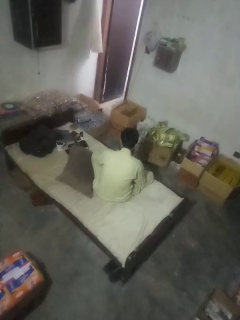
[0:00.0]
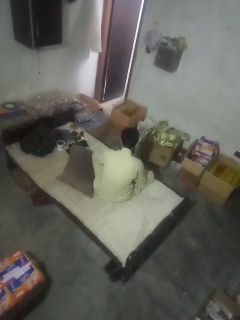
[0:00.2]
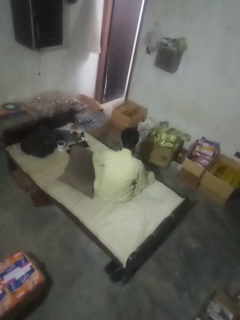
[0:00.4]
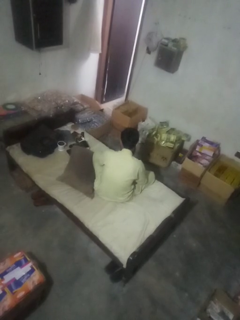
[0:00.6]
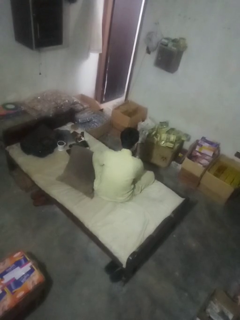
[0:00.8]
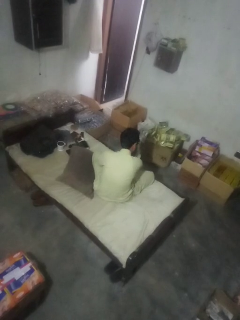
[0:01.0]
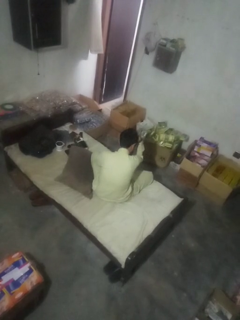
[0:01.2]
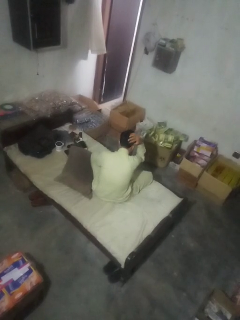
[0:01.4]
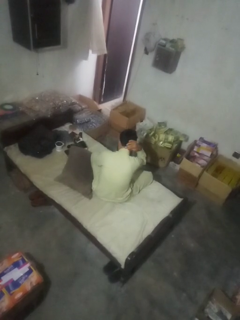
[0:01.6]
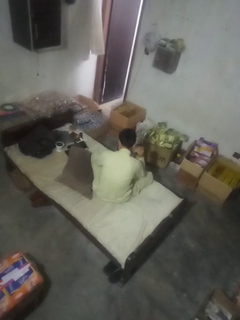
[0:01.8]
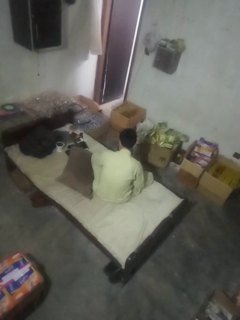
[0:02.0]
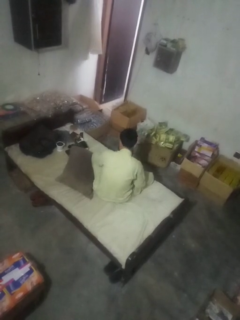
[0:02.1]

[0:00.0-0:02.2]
person strokes hair

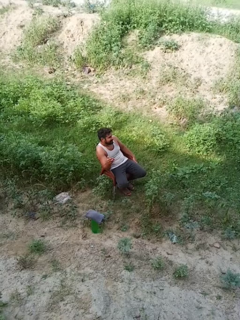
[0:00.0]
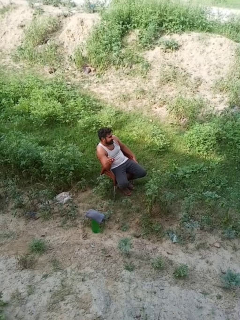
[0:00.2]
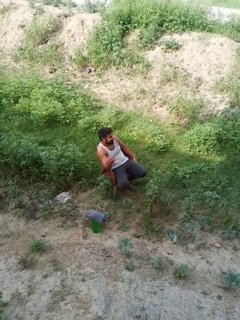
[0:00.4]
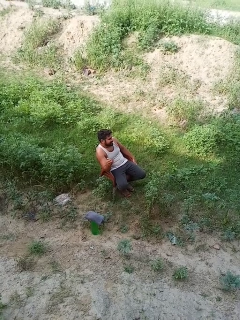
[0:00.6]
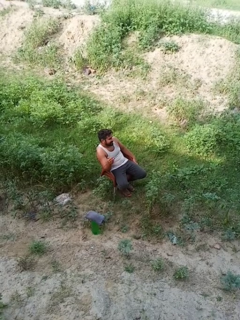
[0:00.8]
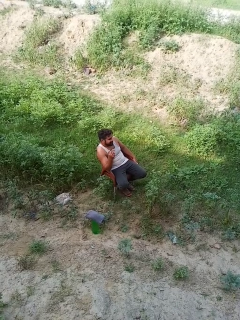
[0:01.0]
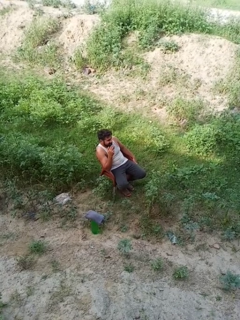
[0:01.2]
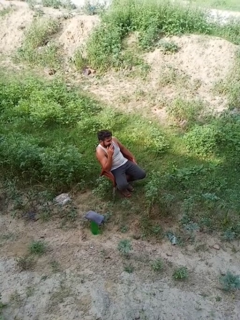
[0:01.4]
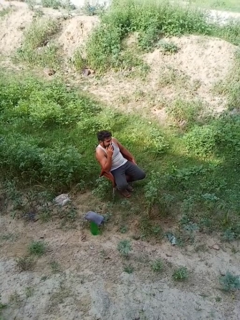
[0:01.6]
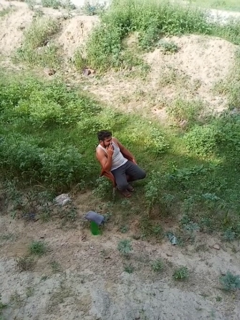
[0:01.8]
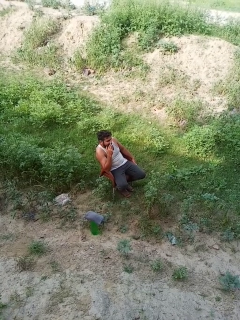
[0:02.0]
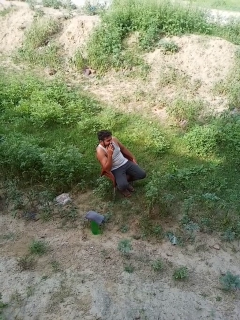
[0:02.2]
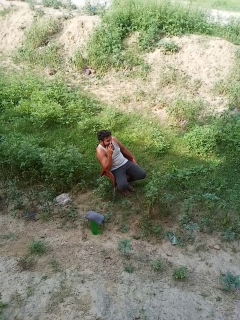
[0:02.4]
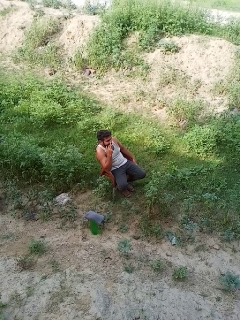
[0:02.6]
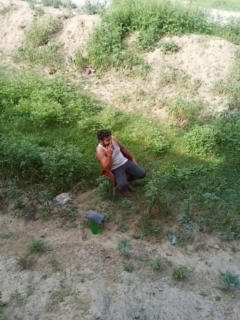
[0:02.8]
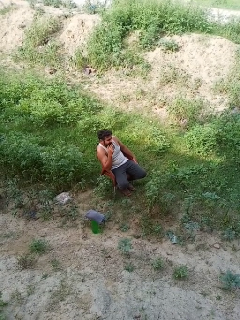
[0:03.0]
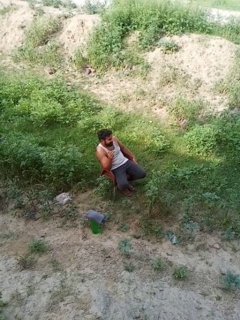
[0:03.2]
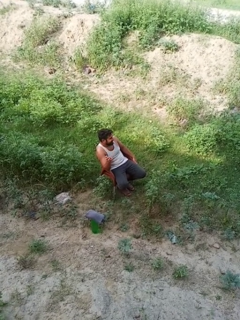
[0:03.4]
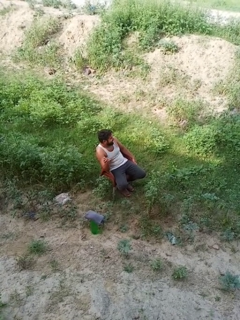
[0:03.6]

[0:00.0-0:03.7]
person vapes

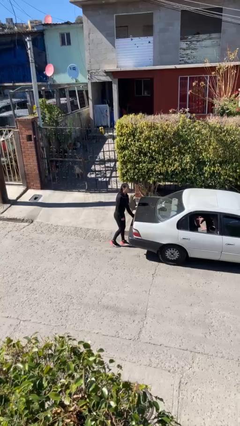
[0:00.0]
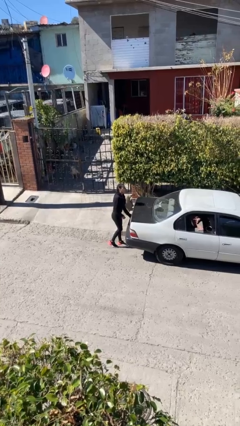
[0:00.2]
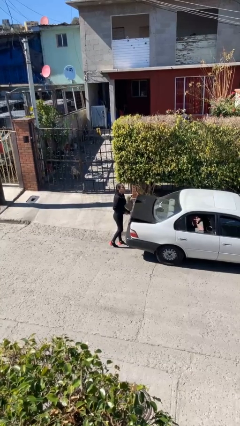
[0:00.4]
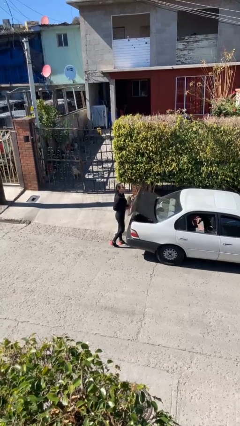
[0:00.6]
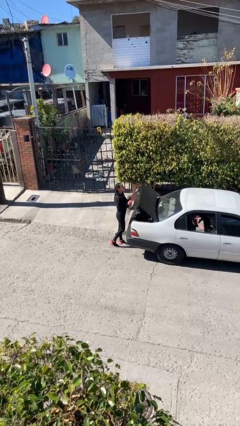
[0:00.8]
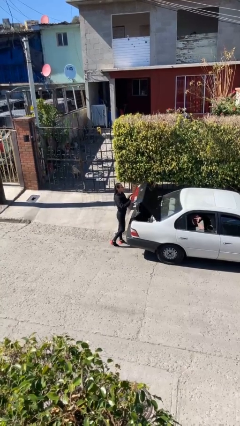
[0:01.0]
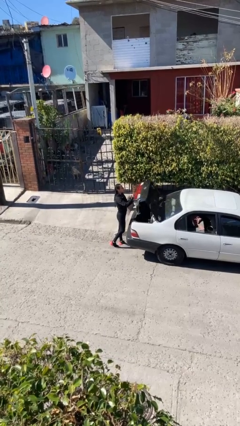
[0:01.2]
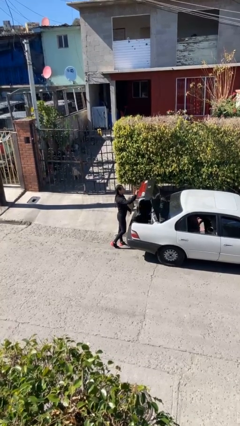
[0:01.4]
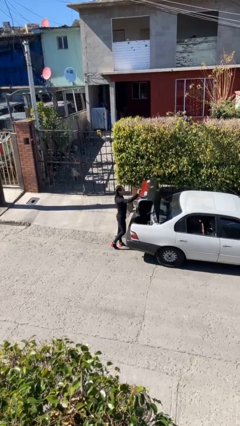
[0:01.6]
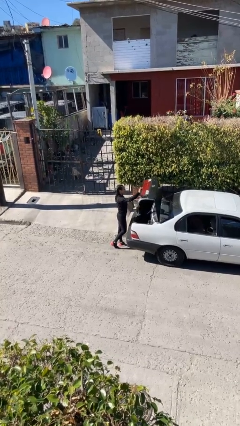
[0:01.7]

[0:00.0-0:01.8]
person opens car trunk

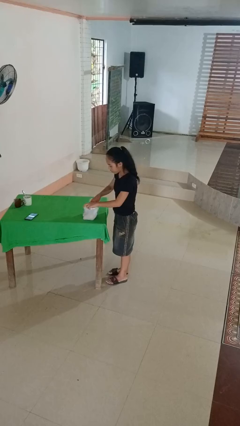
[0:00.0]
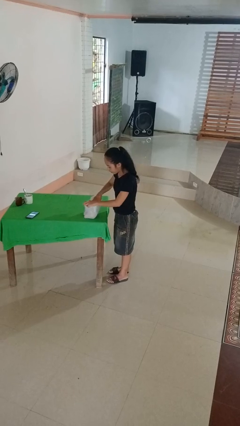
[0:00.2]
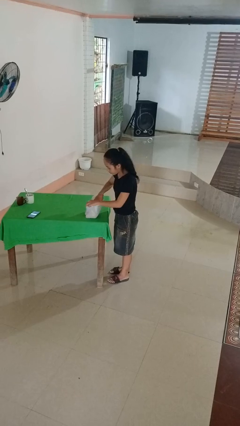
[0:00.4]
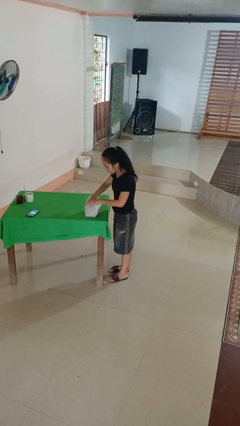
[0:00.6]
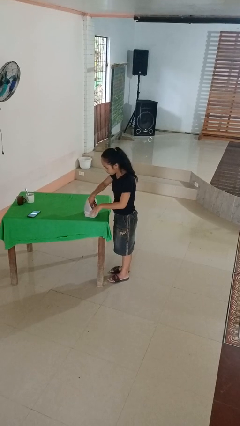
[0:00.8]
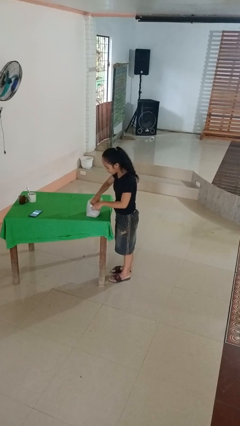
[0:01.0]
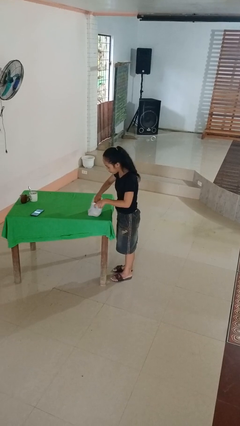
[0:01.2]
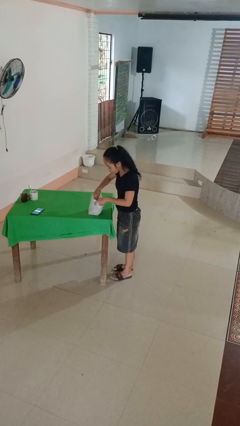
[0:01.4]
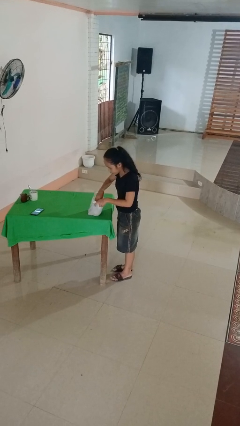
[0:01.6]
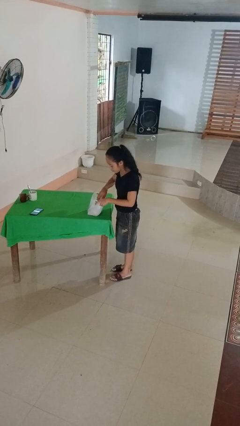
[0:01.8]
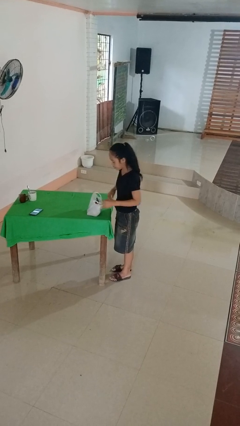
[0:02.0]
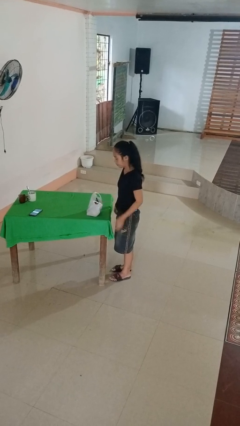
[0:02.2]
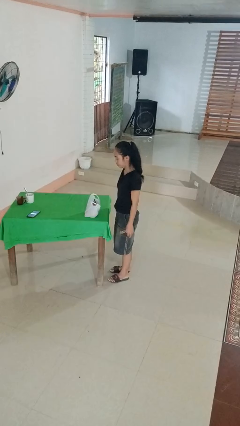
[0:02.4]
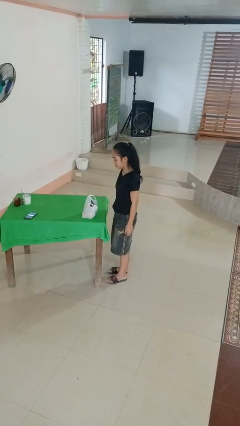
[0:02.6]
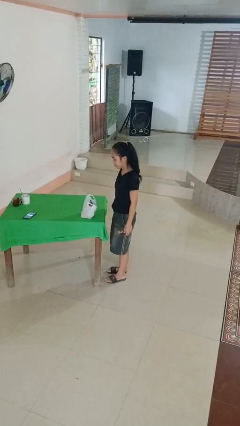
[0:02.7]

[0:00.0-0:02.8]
person searches in bag

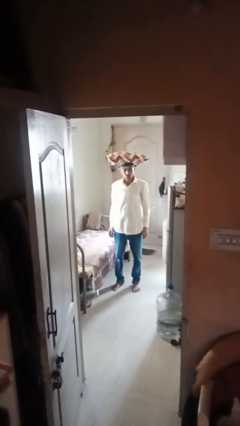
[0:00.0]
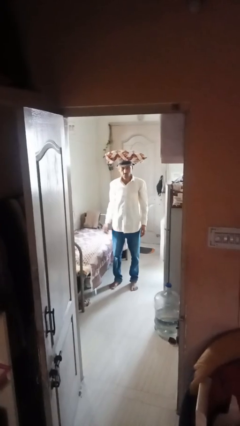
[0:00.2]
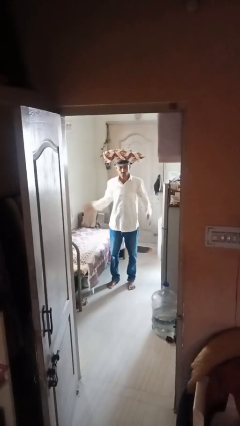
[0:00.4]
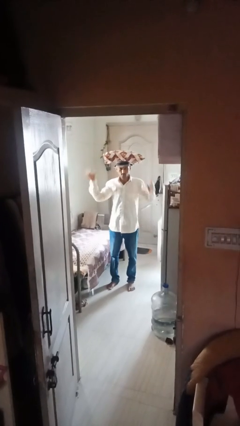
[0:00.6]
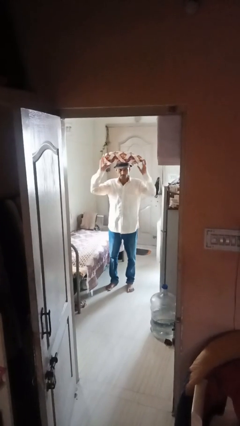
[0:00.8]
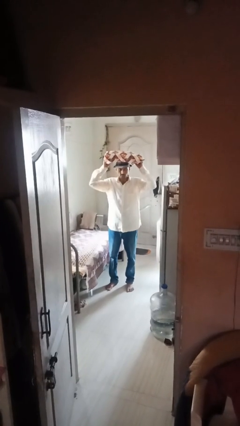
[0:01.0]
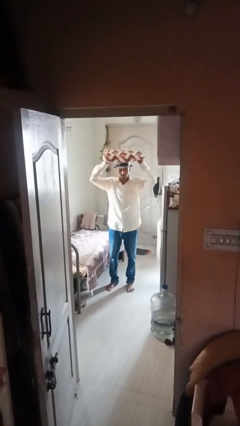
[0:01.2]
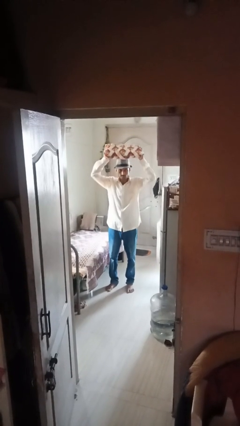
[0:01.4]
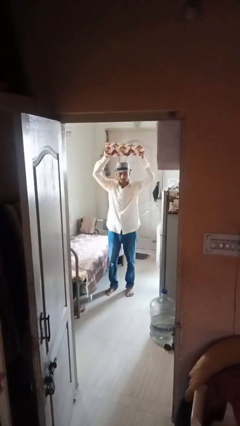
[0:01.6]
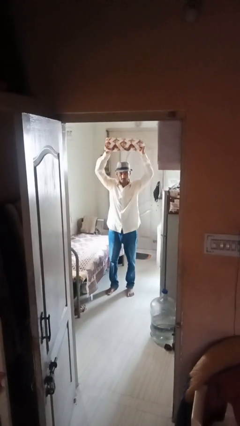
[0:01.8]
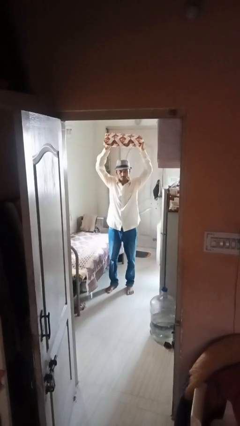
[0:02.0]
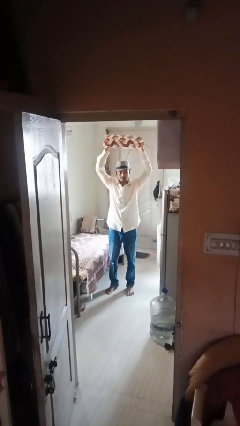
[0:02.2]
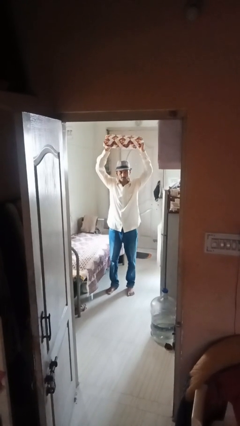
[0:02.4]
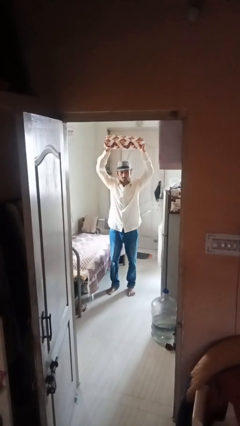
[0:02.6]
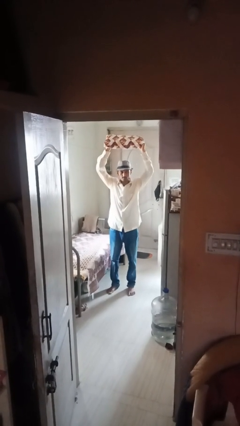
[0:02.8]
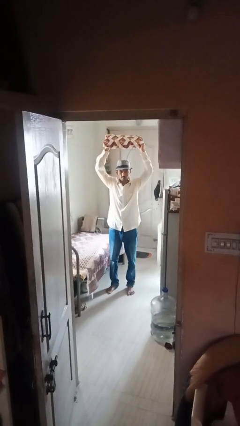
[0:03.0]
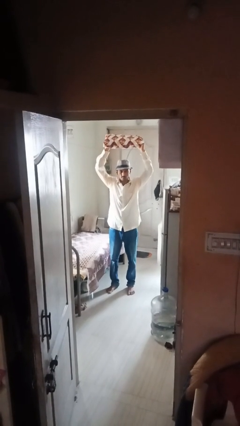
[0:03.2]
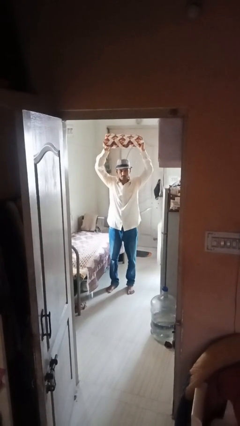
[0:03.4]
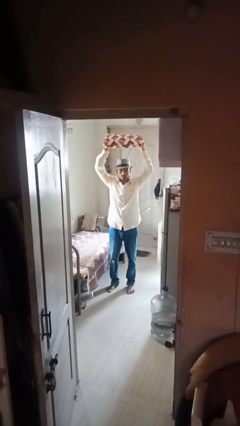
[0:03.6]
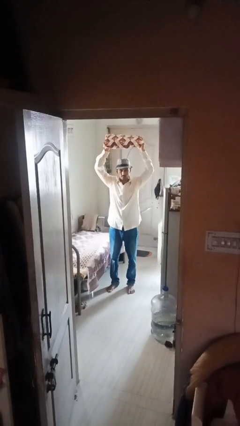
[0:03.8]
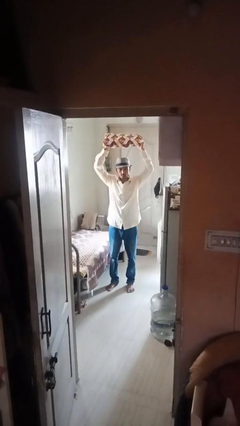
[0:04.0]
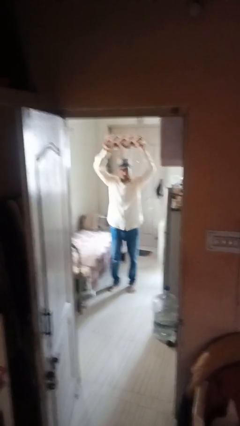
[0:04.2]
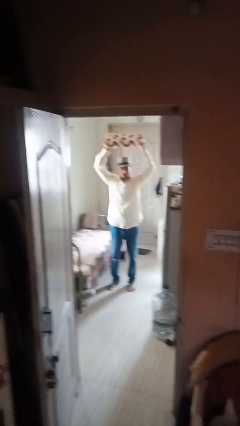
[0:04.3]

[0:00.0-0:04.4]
person holds object above head

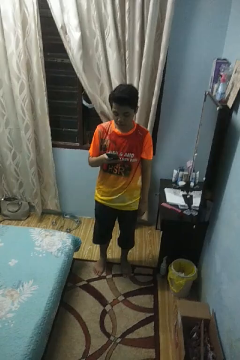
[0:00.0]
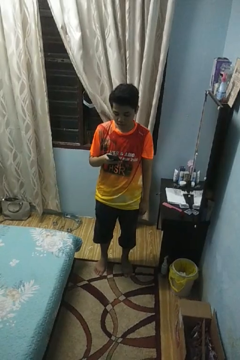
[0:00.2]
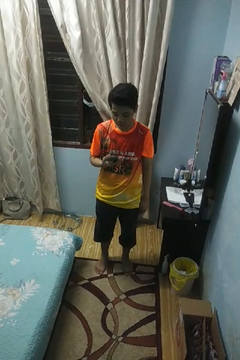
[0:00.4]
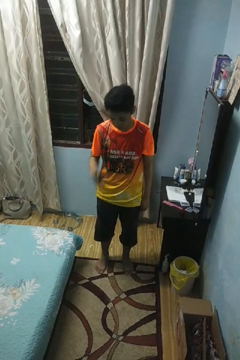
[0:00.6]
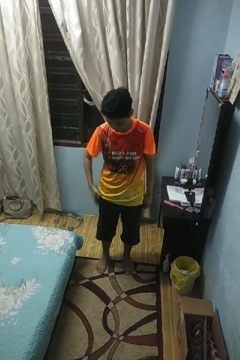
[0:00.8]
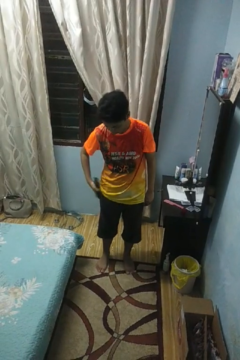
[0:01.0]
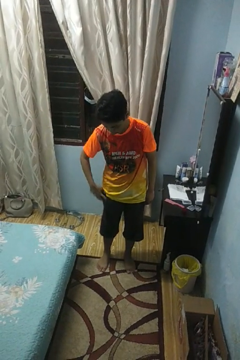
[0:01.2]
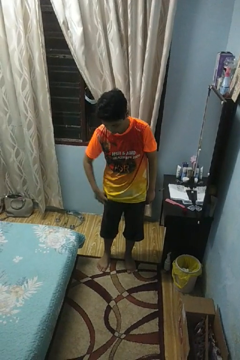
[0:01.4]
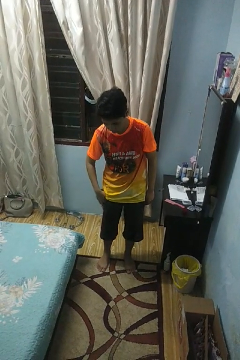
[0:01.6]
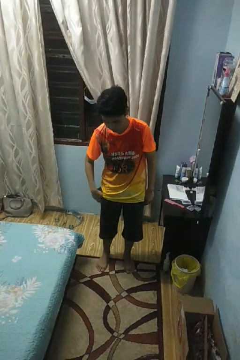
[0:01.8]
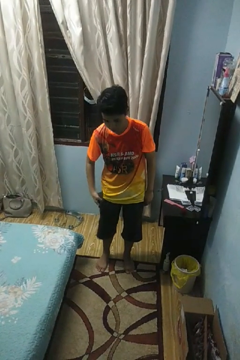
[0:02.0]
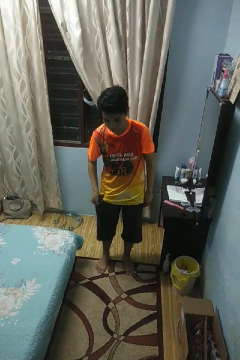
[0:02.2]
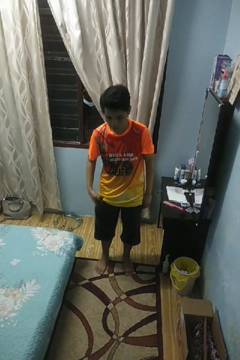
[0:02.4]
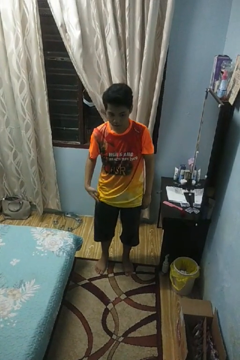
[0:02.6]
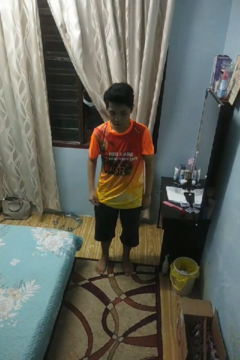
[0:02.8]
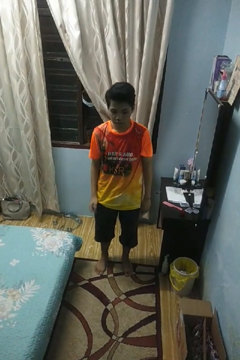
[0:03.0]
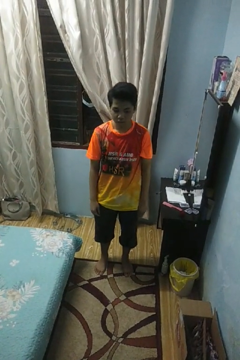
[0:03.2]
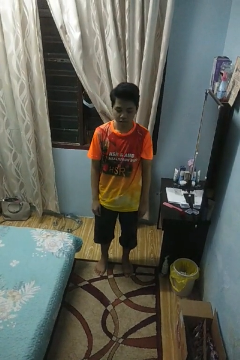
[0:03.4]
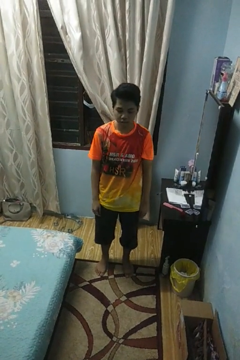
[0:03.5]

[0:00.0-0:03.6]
person puts phone into pocket

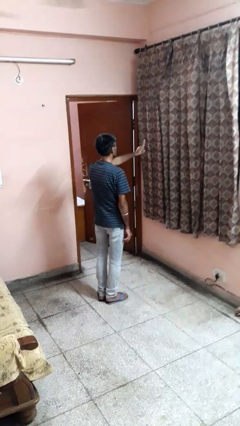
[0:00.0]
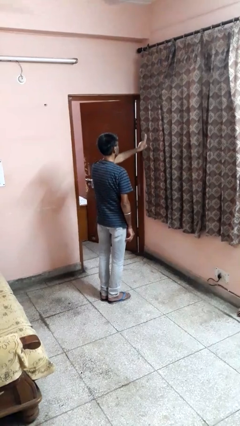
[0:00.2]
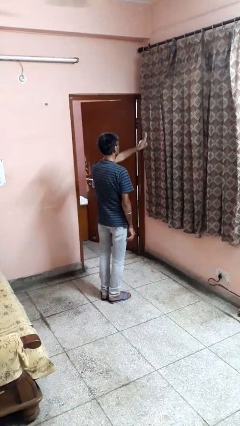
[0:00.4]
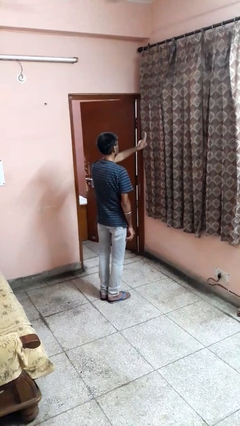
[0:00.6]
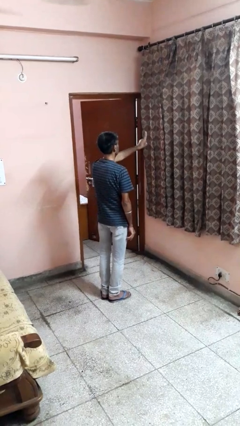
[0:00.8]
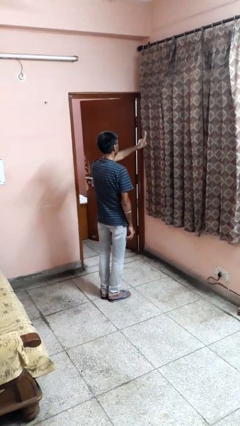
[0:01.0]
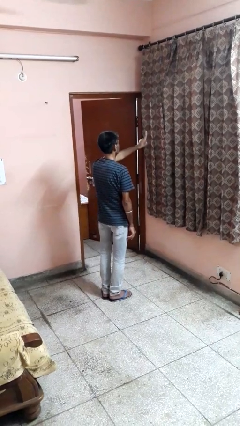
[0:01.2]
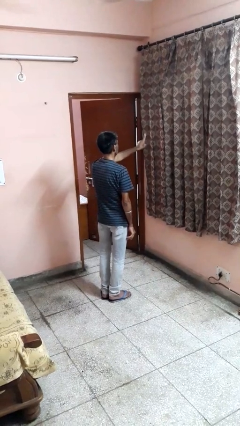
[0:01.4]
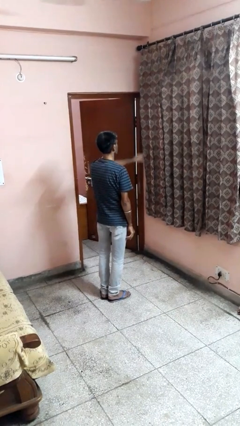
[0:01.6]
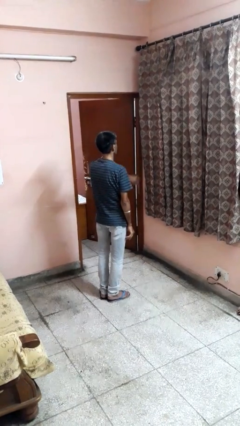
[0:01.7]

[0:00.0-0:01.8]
person gestures number one
